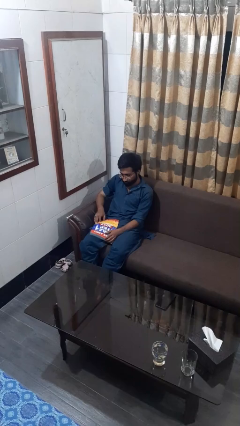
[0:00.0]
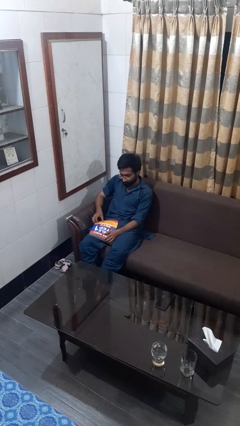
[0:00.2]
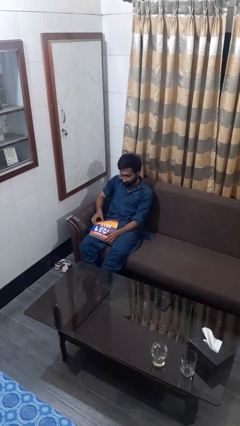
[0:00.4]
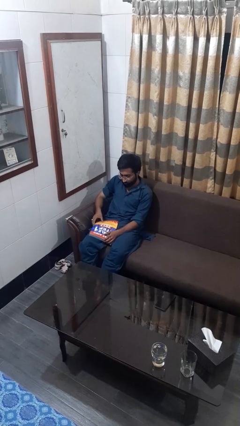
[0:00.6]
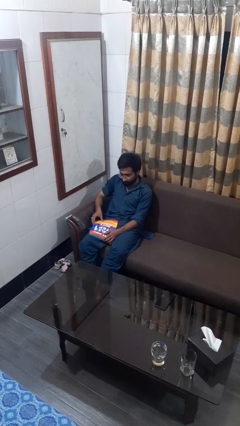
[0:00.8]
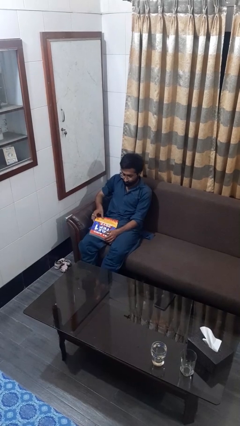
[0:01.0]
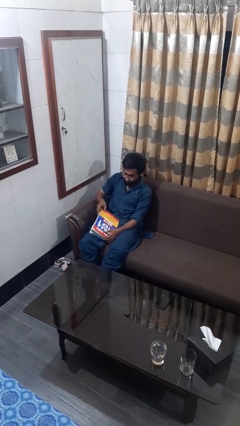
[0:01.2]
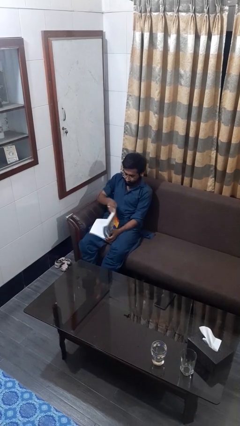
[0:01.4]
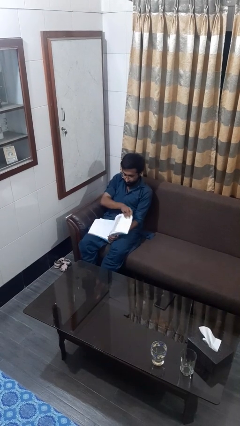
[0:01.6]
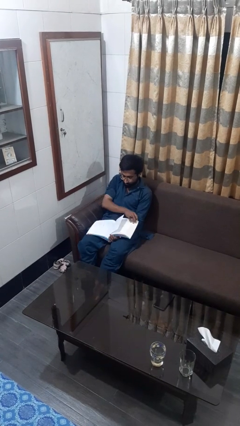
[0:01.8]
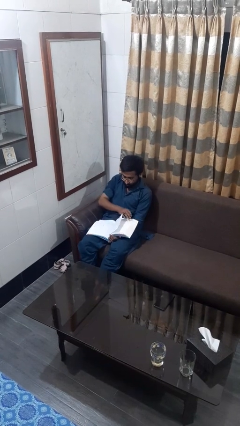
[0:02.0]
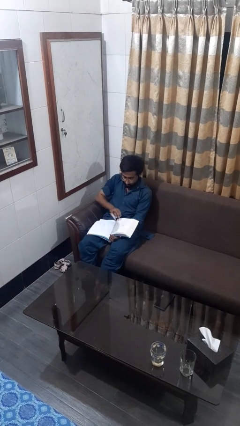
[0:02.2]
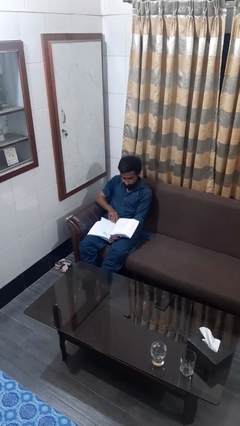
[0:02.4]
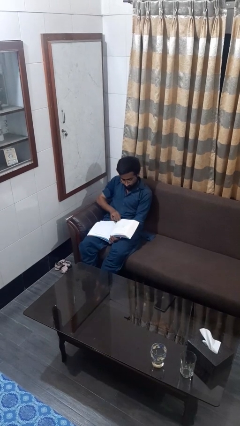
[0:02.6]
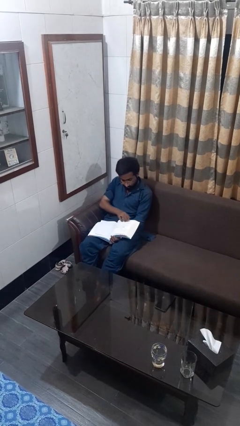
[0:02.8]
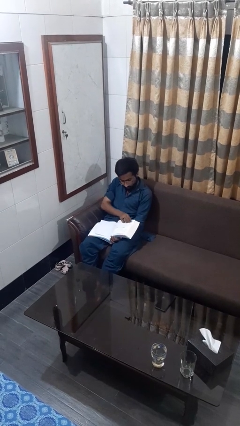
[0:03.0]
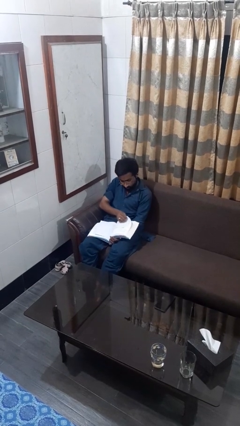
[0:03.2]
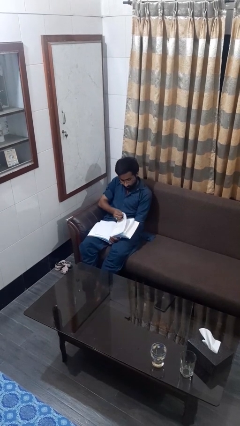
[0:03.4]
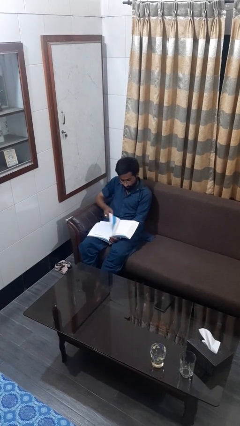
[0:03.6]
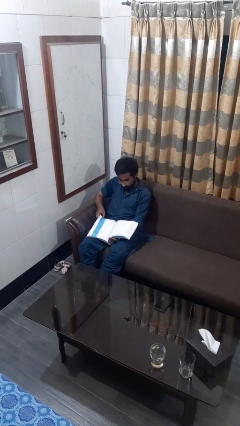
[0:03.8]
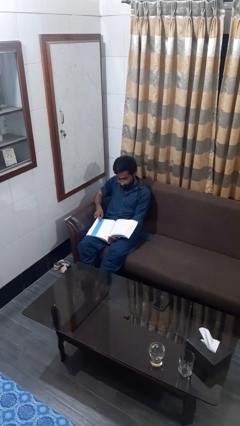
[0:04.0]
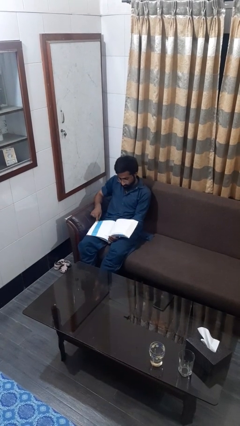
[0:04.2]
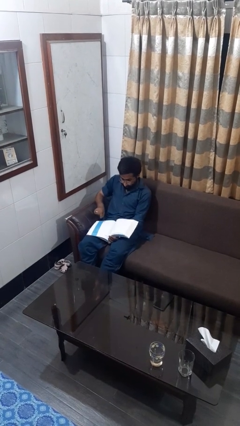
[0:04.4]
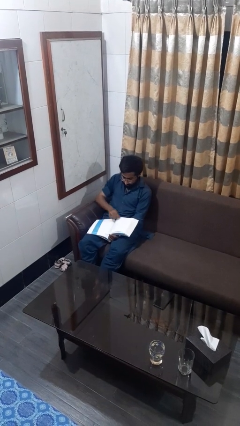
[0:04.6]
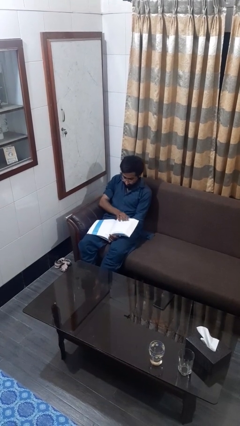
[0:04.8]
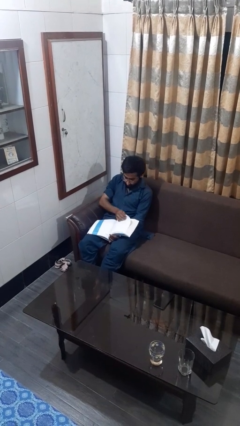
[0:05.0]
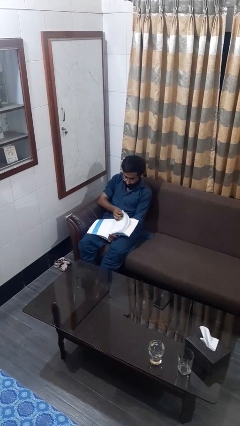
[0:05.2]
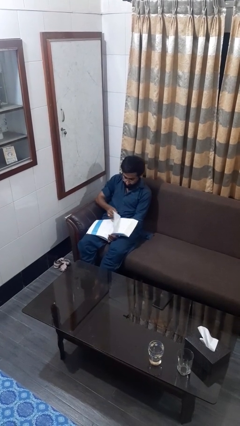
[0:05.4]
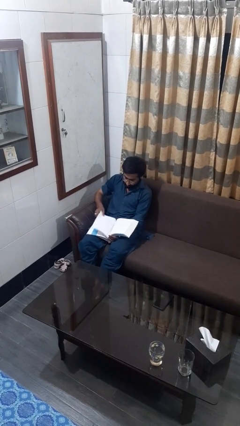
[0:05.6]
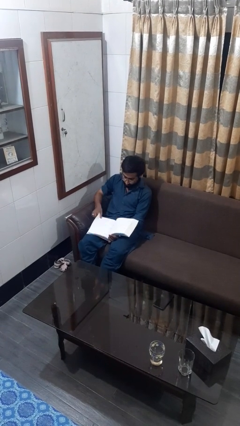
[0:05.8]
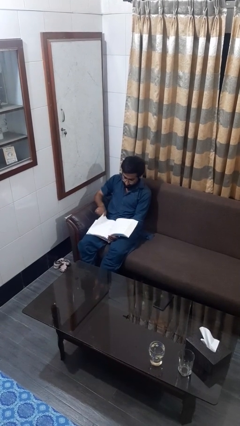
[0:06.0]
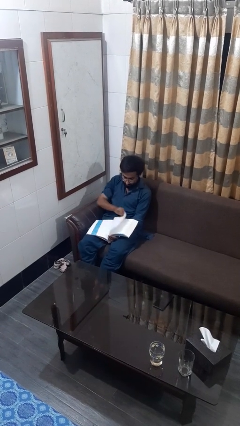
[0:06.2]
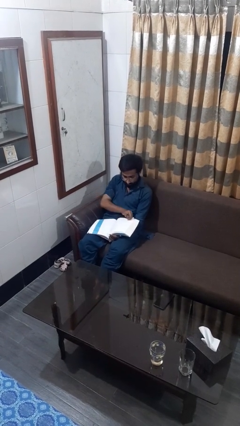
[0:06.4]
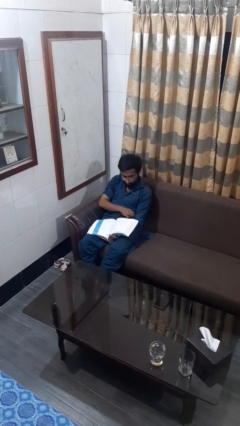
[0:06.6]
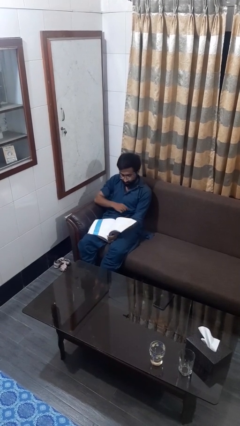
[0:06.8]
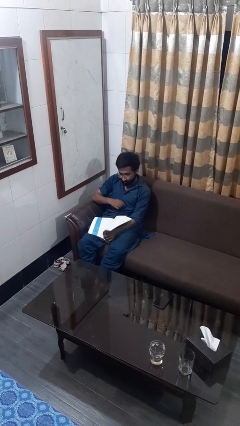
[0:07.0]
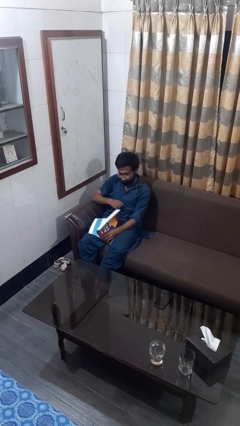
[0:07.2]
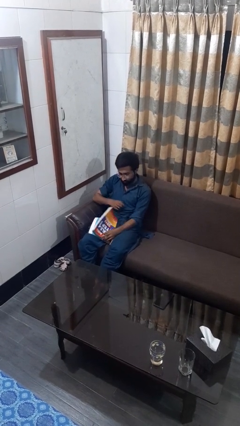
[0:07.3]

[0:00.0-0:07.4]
person reads book

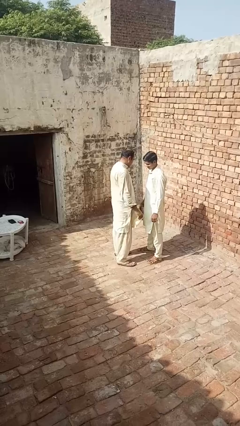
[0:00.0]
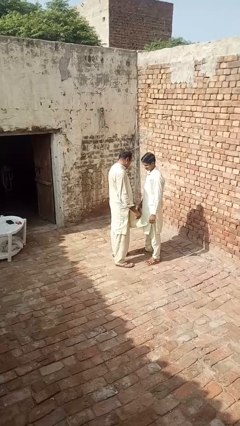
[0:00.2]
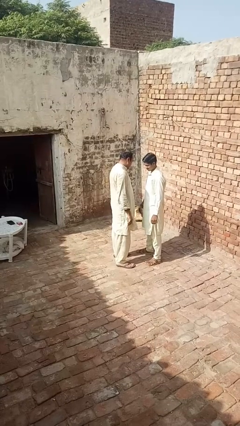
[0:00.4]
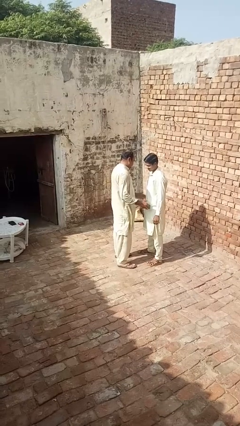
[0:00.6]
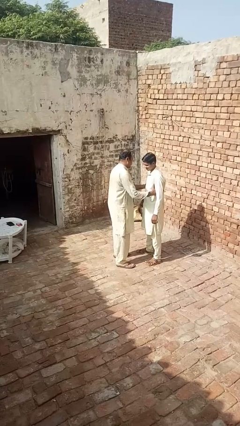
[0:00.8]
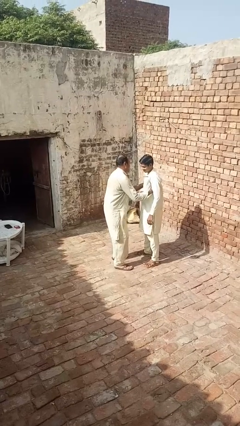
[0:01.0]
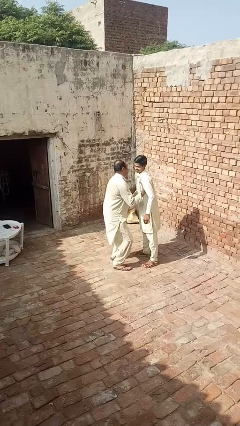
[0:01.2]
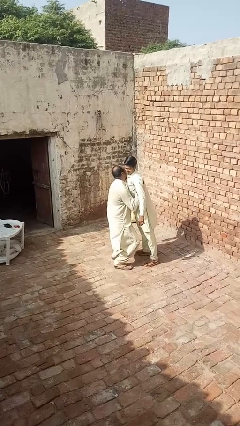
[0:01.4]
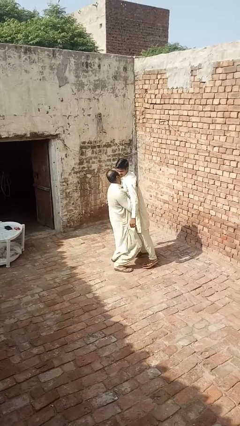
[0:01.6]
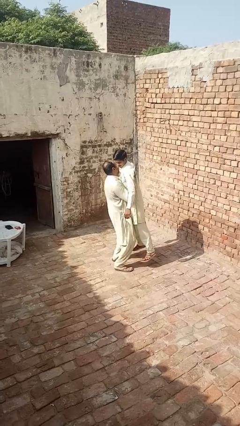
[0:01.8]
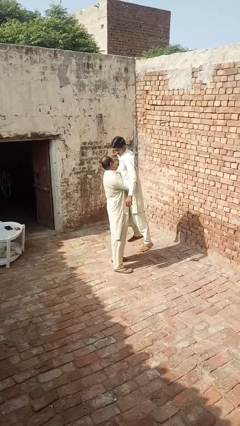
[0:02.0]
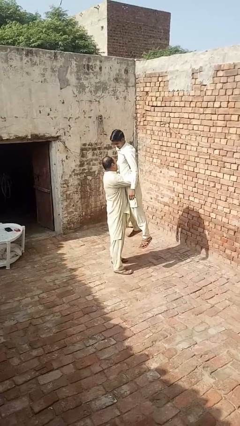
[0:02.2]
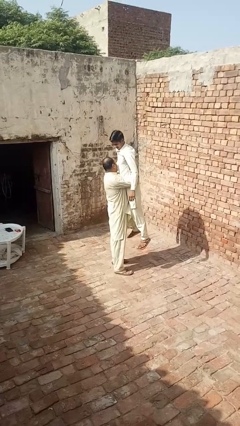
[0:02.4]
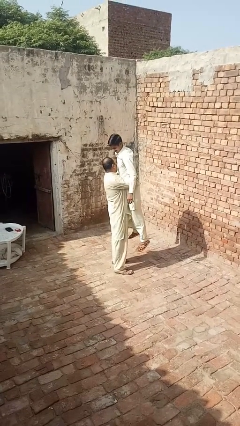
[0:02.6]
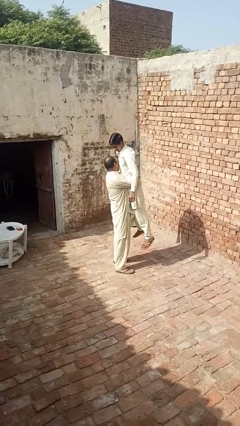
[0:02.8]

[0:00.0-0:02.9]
person picks up person

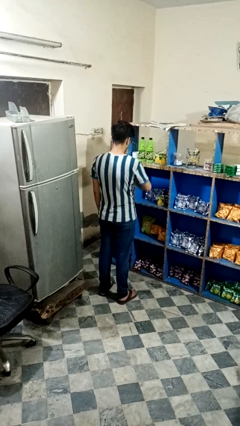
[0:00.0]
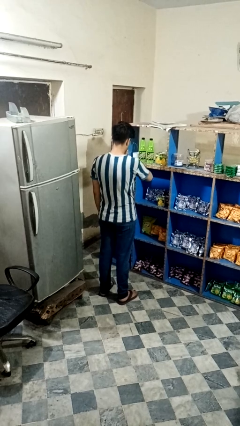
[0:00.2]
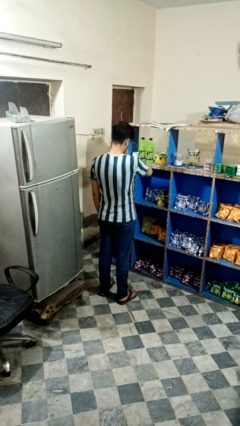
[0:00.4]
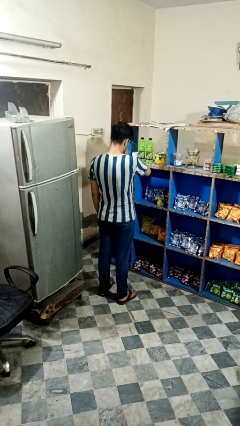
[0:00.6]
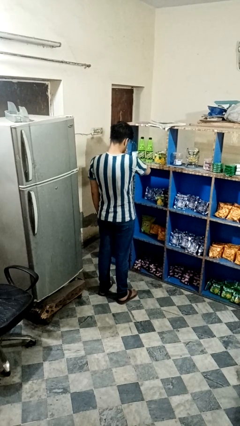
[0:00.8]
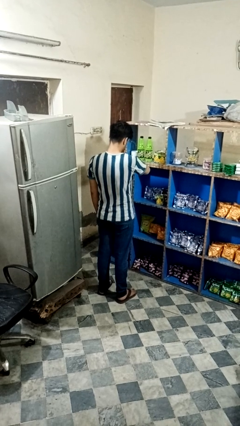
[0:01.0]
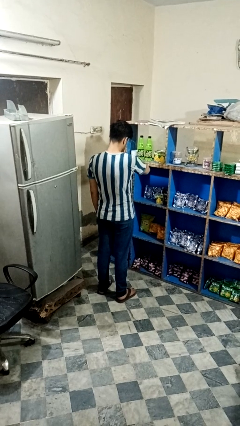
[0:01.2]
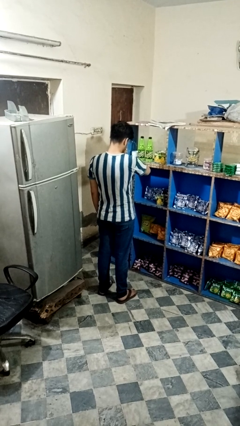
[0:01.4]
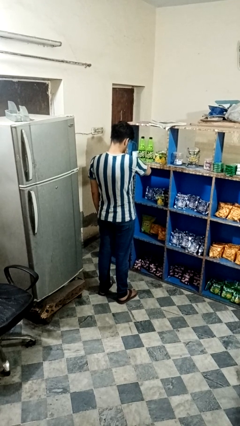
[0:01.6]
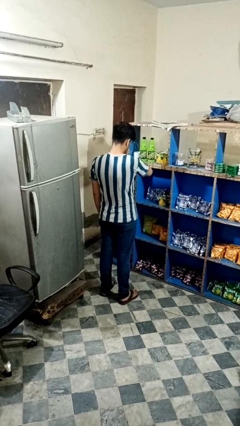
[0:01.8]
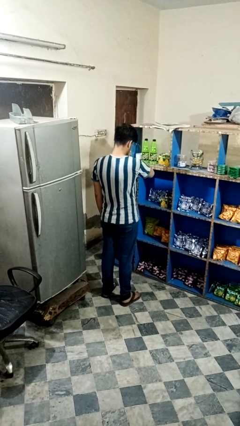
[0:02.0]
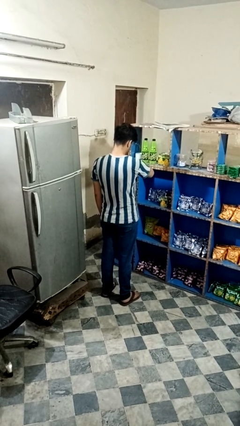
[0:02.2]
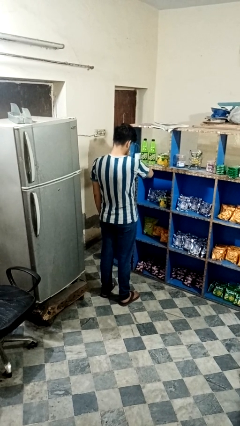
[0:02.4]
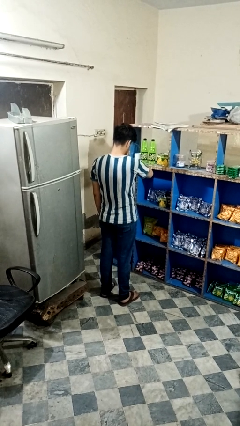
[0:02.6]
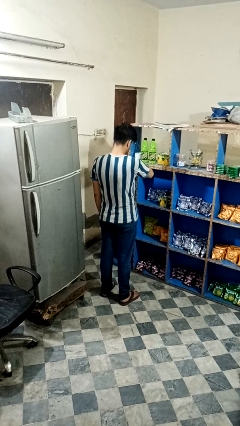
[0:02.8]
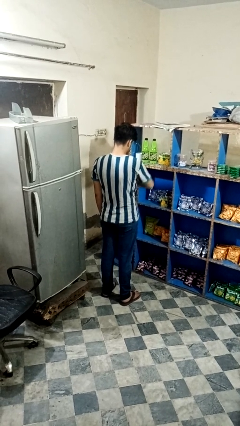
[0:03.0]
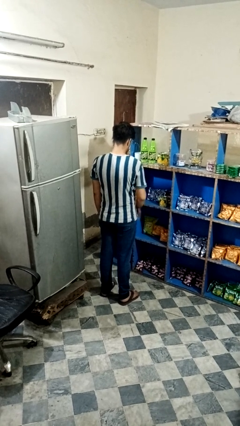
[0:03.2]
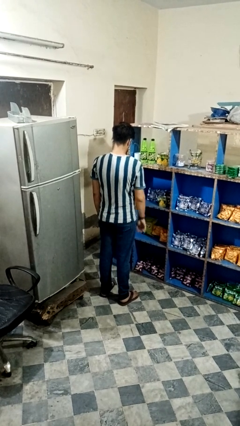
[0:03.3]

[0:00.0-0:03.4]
person looks at wristwatch

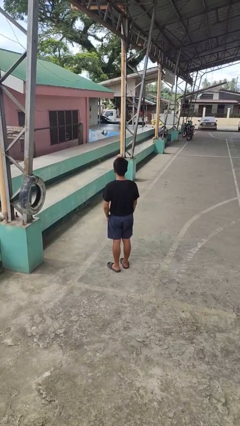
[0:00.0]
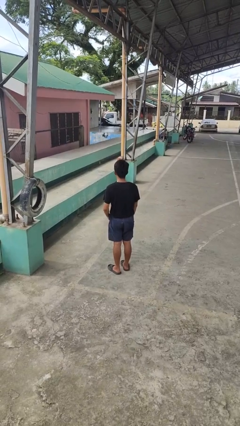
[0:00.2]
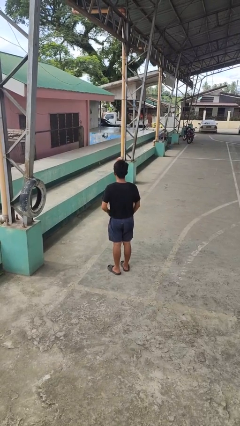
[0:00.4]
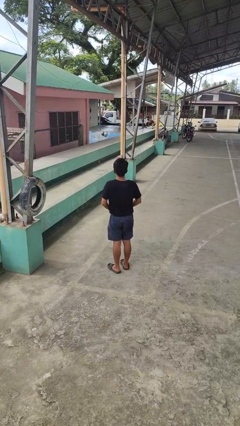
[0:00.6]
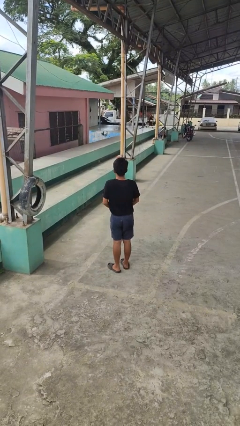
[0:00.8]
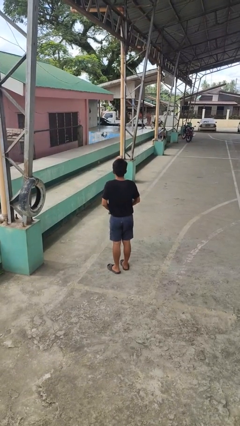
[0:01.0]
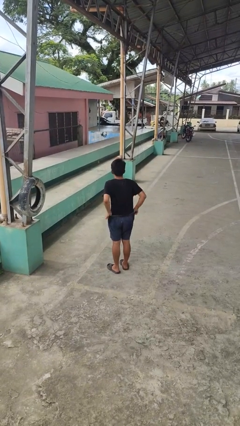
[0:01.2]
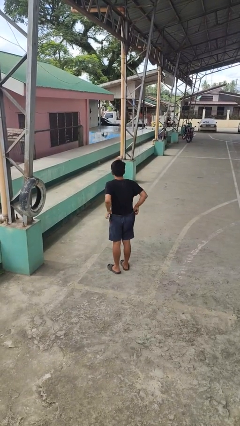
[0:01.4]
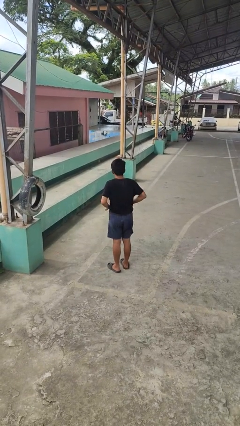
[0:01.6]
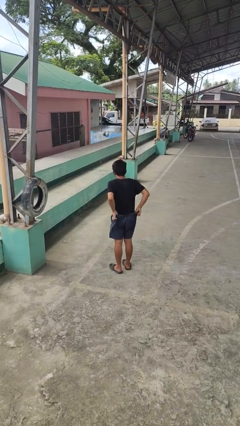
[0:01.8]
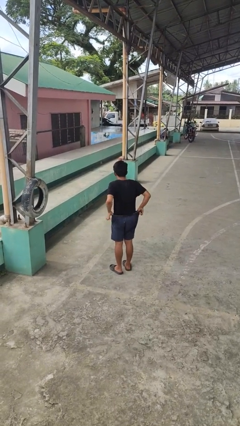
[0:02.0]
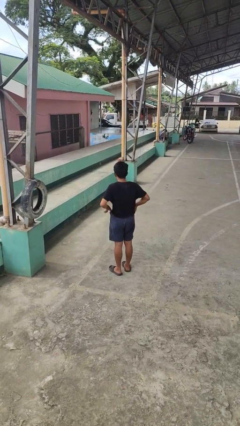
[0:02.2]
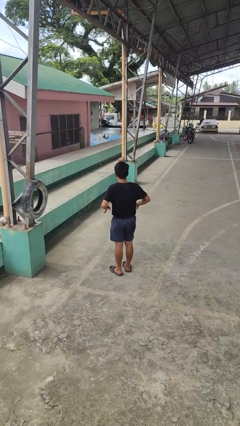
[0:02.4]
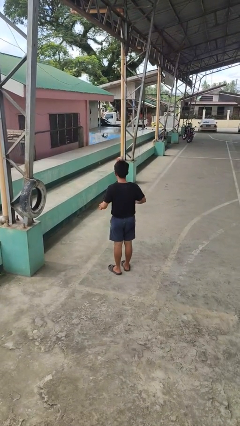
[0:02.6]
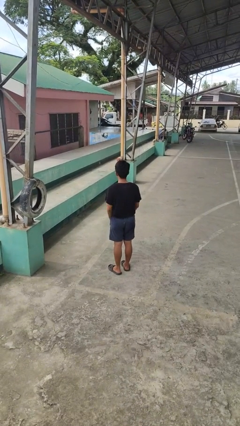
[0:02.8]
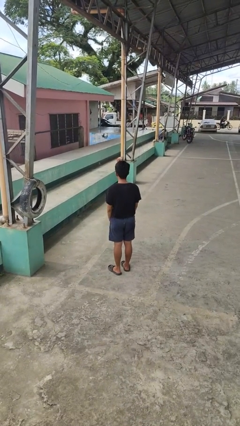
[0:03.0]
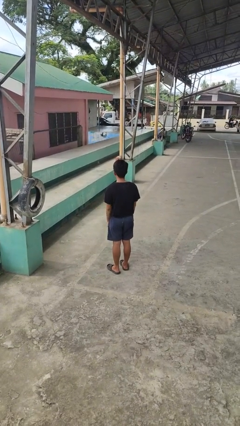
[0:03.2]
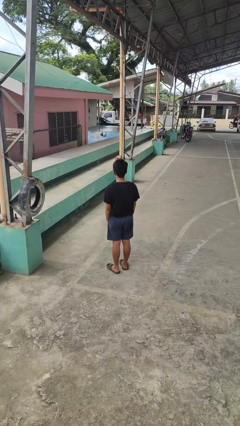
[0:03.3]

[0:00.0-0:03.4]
person hikes up pants

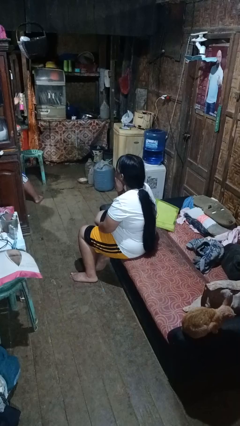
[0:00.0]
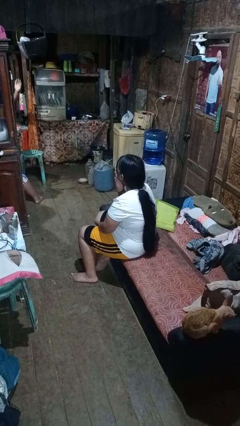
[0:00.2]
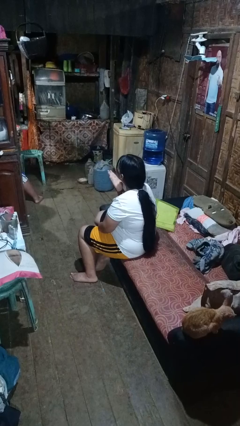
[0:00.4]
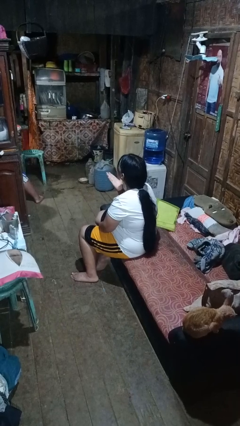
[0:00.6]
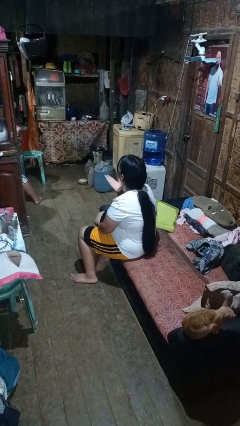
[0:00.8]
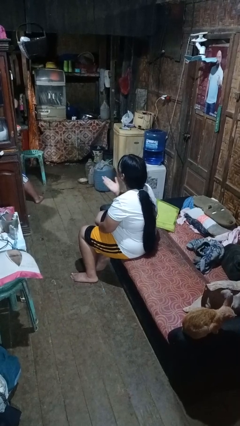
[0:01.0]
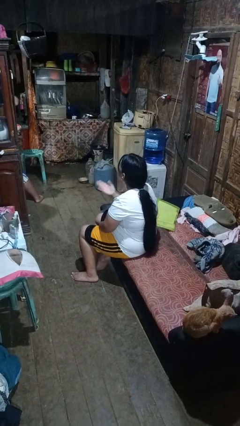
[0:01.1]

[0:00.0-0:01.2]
person gestures blow kiss
